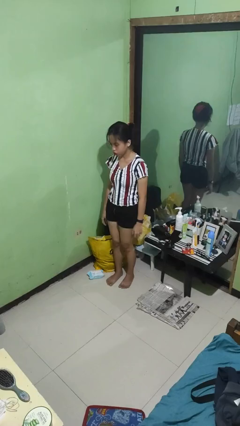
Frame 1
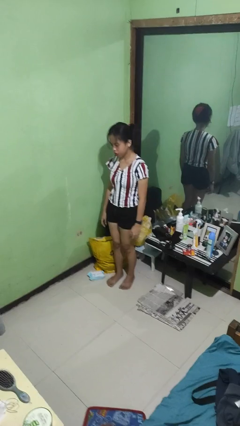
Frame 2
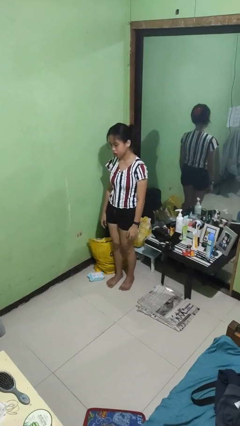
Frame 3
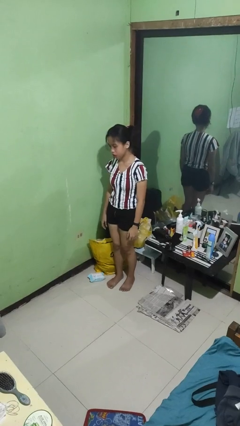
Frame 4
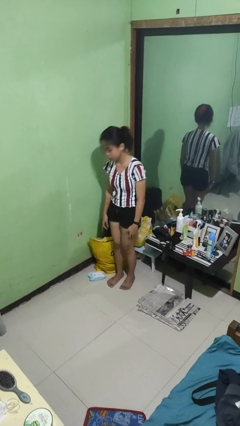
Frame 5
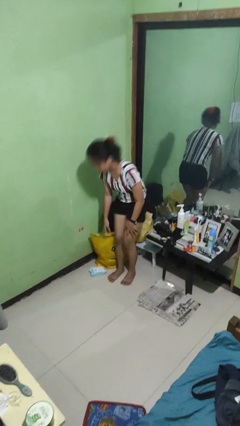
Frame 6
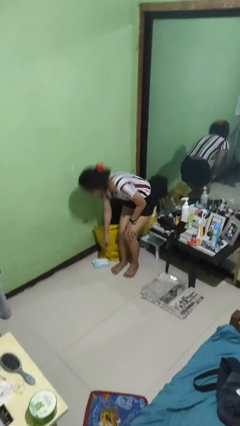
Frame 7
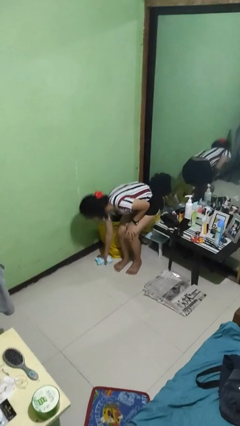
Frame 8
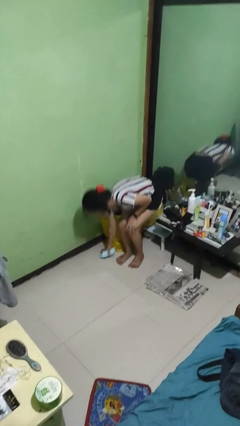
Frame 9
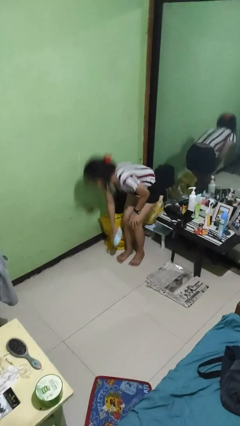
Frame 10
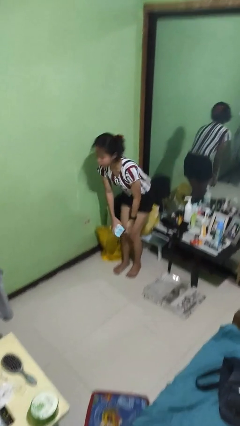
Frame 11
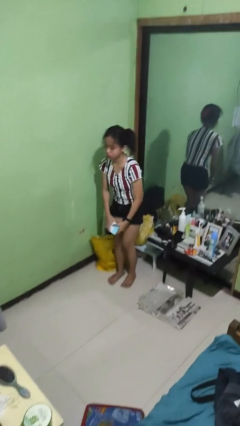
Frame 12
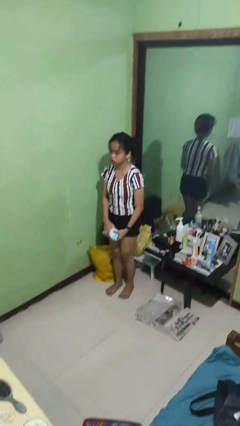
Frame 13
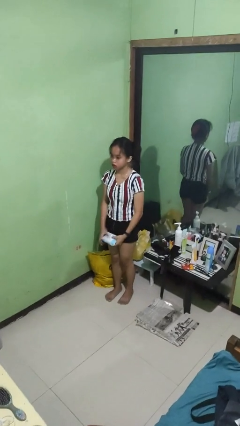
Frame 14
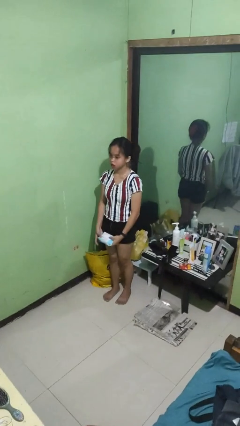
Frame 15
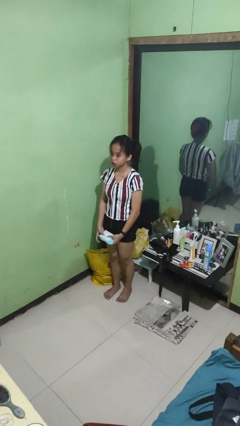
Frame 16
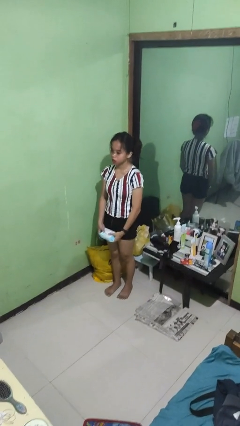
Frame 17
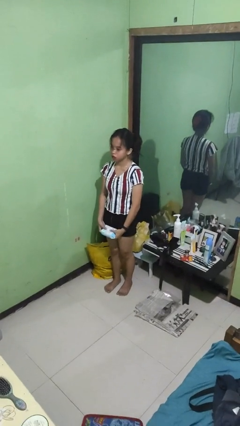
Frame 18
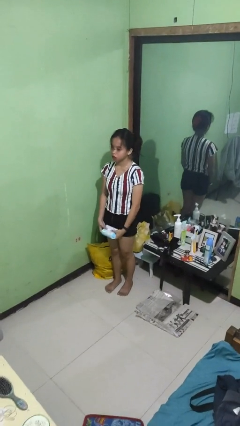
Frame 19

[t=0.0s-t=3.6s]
person picks up object from floor

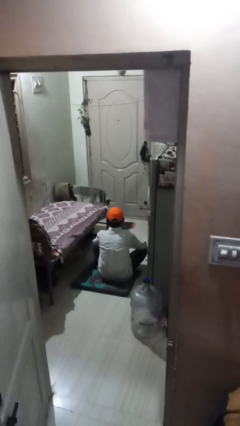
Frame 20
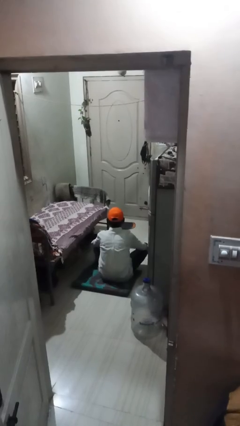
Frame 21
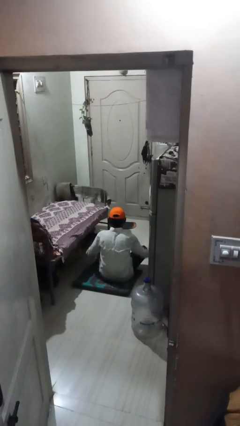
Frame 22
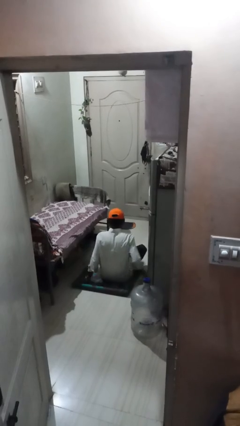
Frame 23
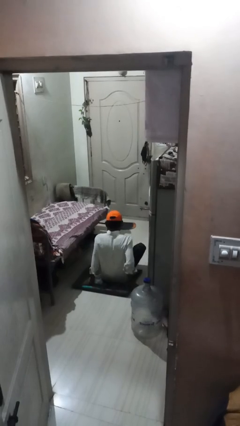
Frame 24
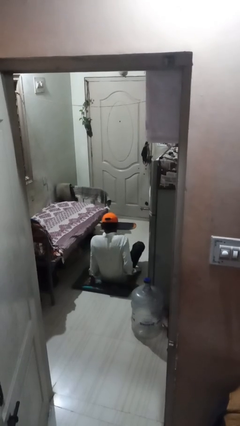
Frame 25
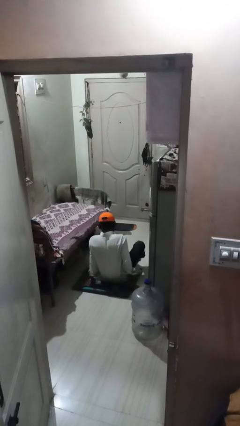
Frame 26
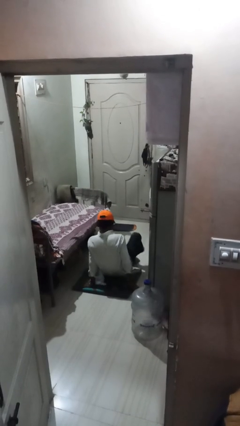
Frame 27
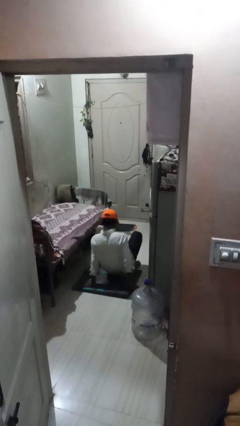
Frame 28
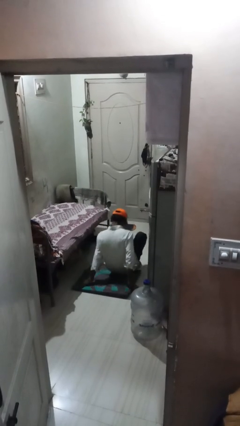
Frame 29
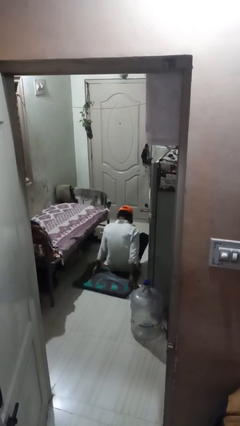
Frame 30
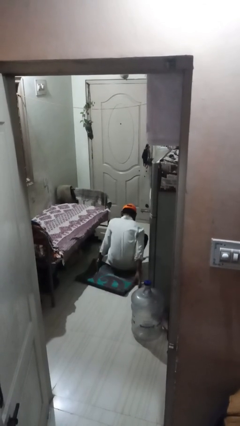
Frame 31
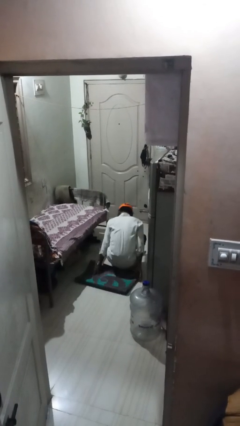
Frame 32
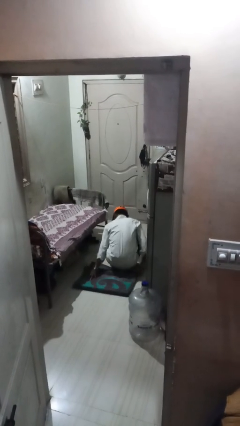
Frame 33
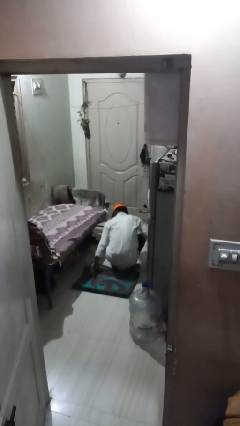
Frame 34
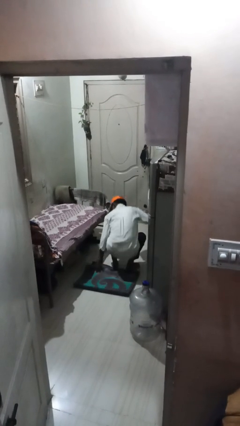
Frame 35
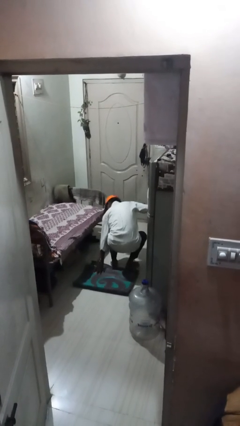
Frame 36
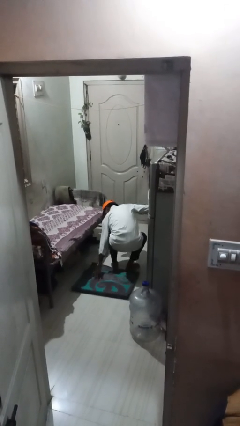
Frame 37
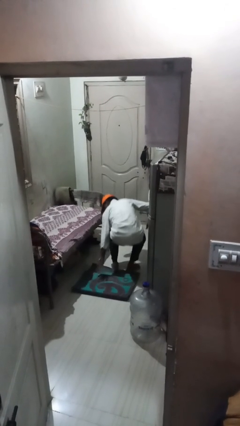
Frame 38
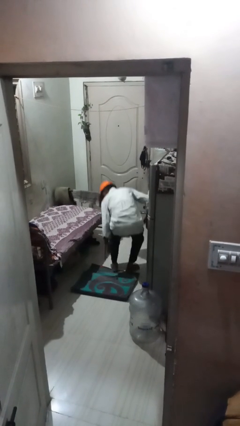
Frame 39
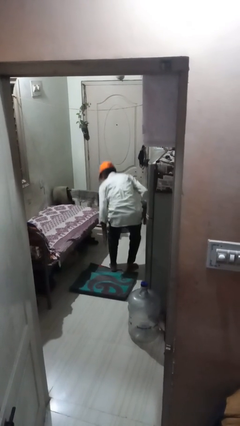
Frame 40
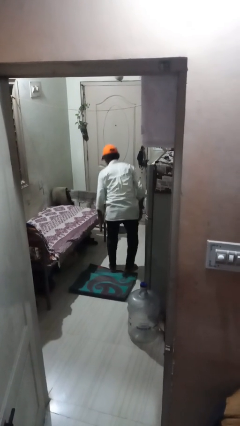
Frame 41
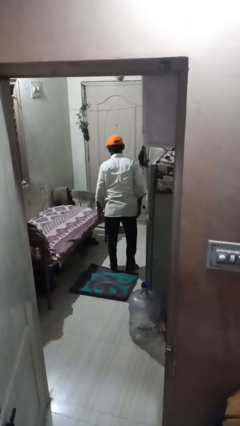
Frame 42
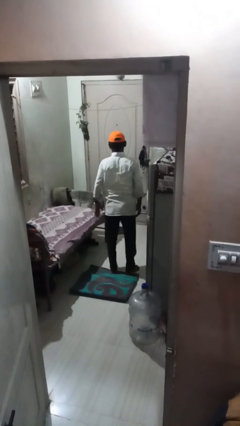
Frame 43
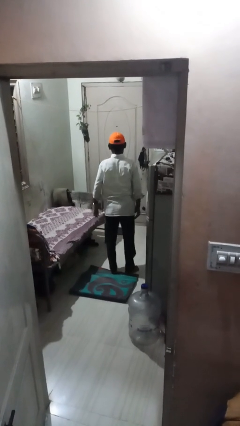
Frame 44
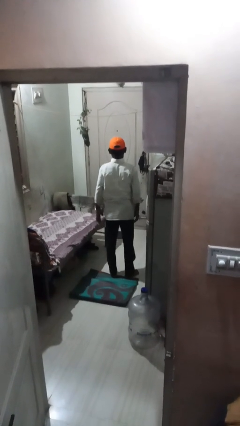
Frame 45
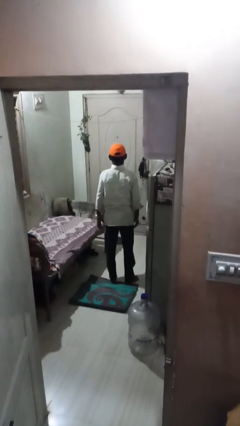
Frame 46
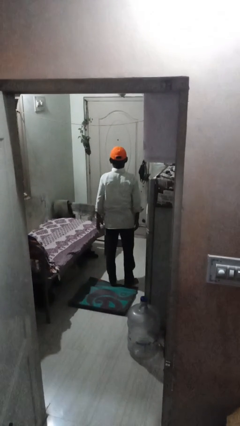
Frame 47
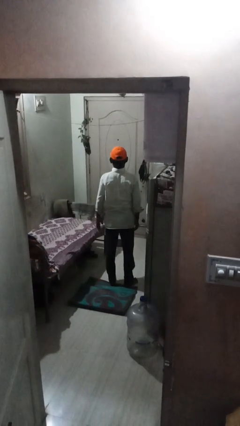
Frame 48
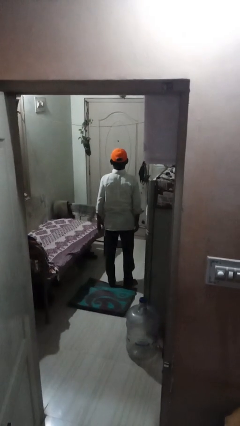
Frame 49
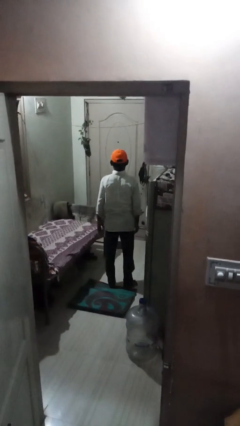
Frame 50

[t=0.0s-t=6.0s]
person stands up from floor

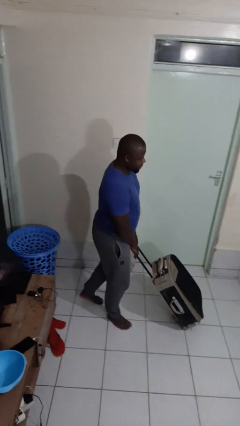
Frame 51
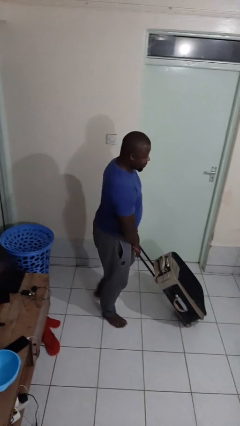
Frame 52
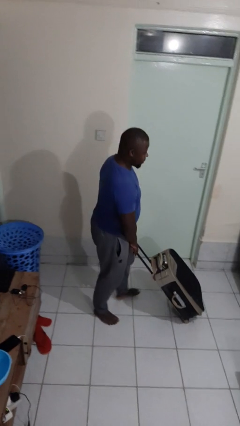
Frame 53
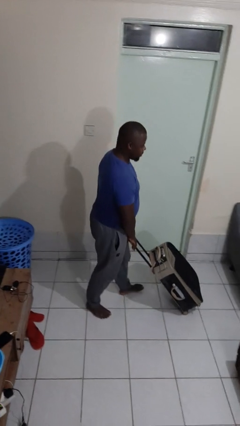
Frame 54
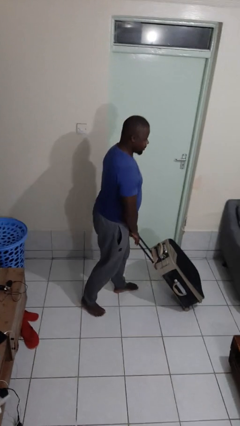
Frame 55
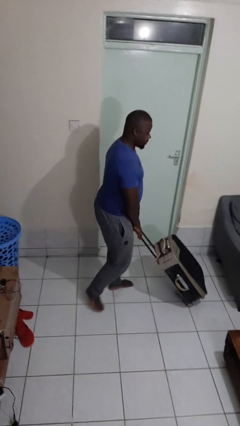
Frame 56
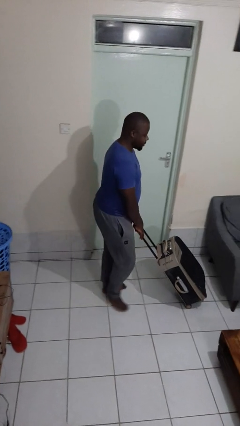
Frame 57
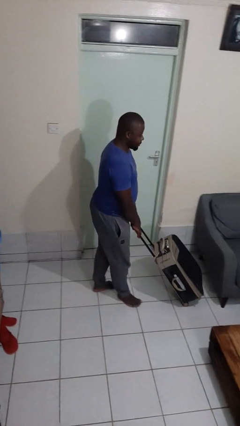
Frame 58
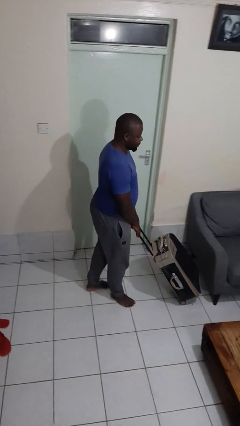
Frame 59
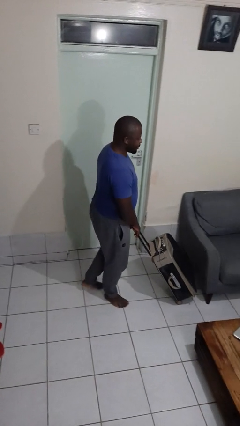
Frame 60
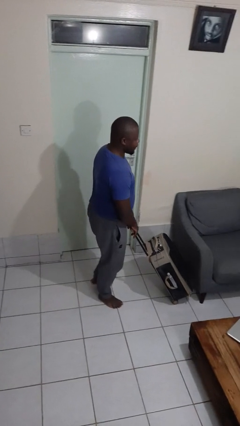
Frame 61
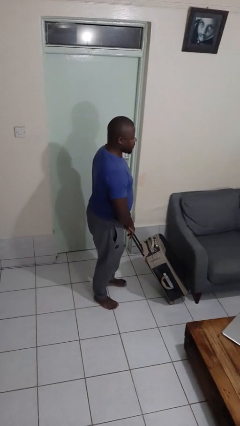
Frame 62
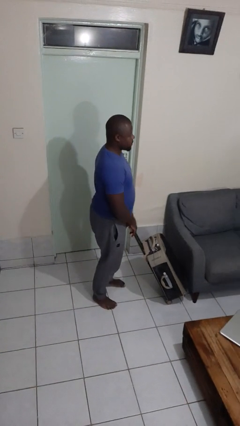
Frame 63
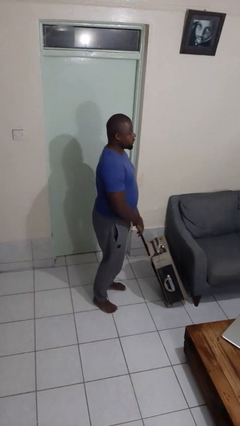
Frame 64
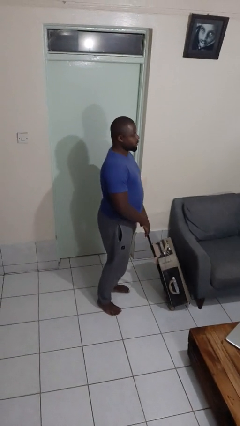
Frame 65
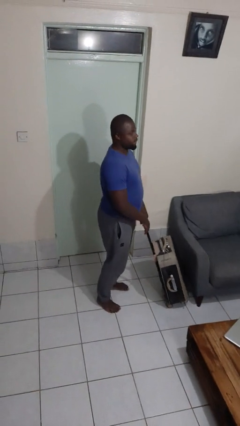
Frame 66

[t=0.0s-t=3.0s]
person pushes wheeled cart

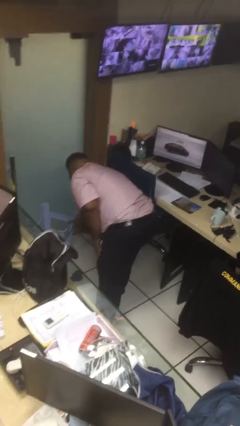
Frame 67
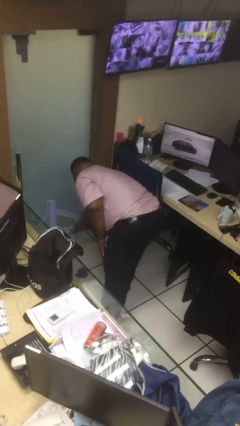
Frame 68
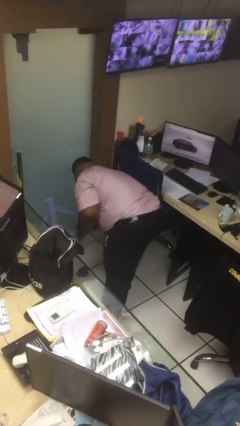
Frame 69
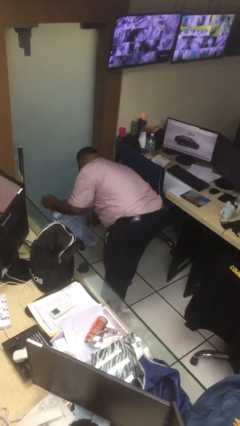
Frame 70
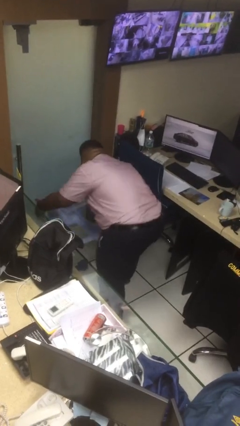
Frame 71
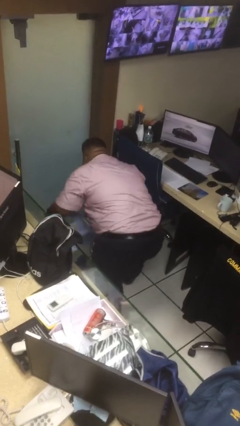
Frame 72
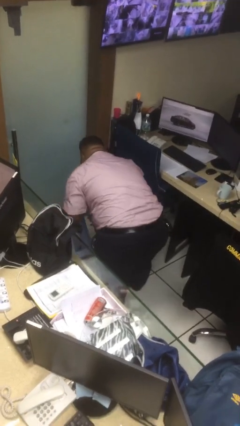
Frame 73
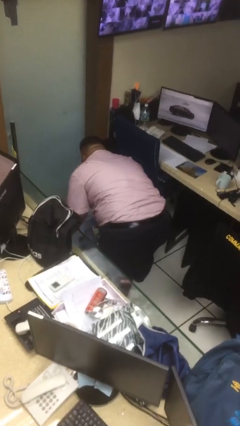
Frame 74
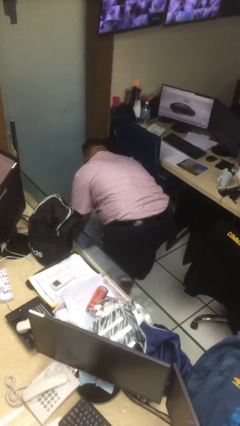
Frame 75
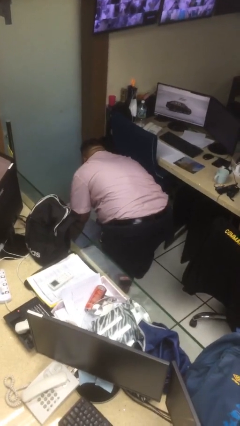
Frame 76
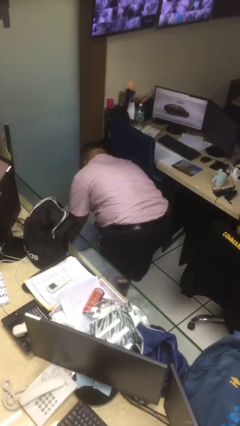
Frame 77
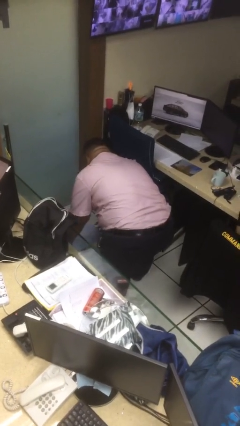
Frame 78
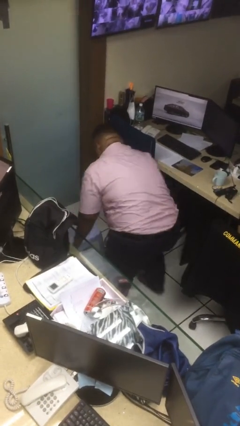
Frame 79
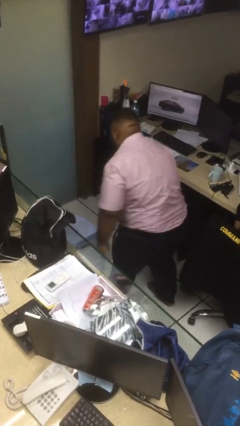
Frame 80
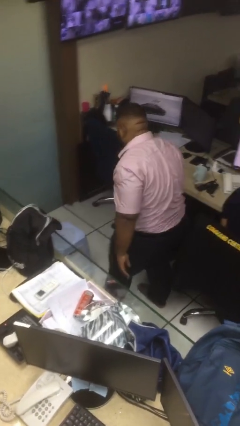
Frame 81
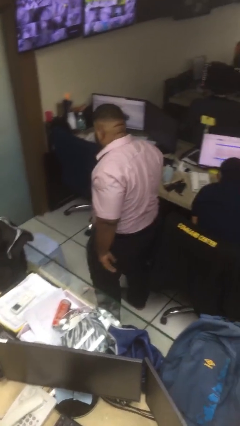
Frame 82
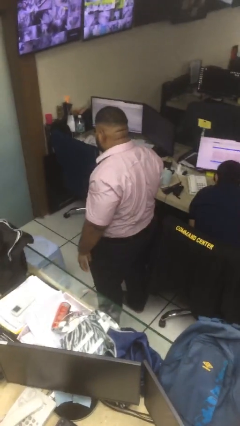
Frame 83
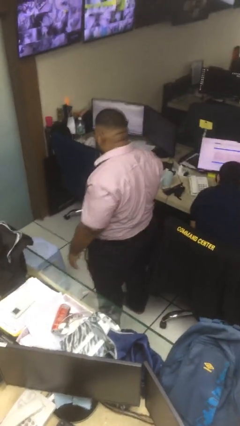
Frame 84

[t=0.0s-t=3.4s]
person sets upright furniture

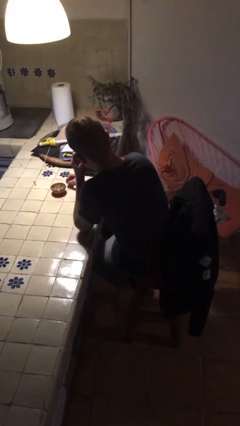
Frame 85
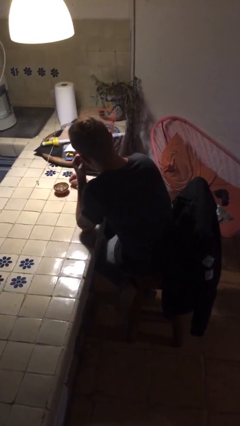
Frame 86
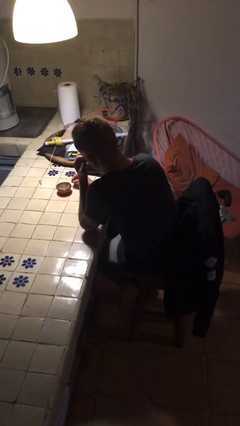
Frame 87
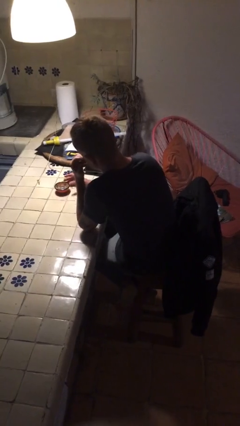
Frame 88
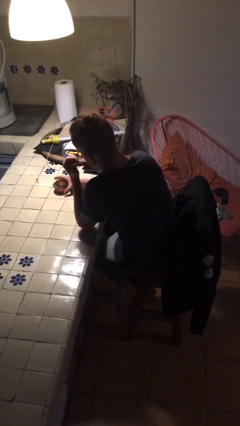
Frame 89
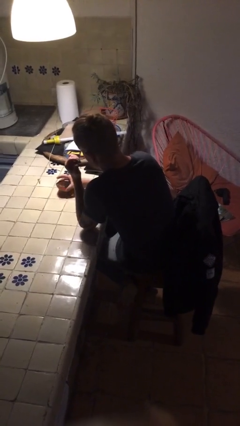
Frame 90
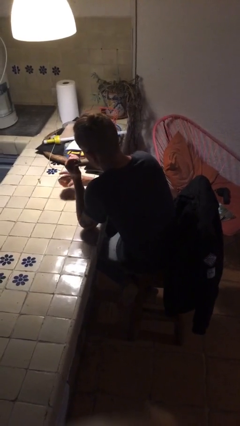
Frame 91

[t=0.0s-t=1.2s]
person picks up object from table
